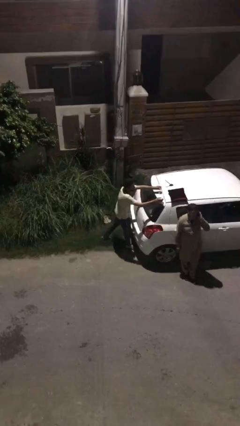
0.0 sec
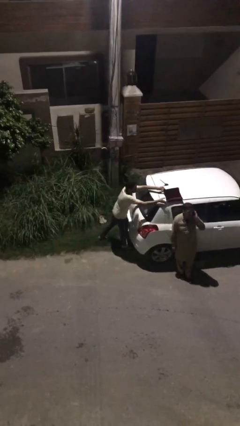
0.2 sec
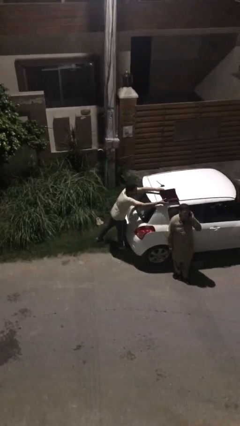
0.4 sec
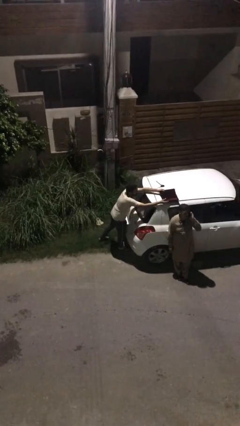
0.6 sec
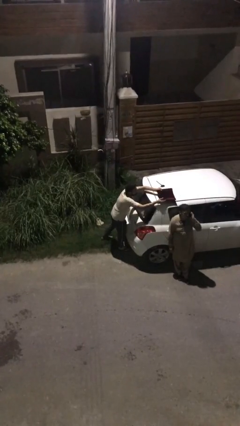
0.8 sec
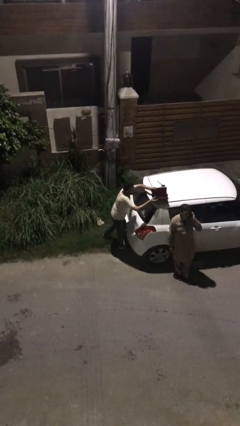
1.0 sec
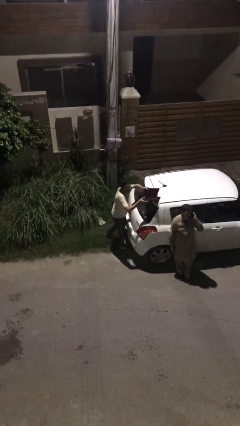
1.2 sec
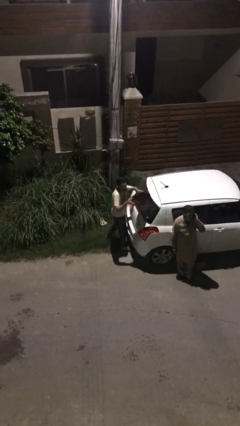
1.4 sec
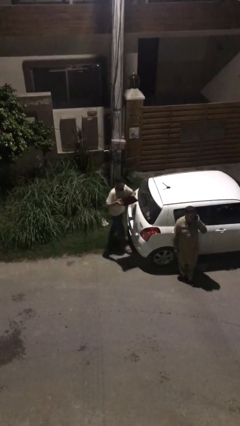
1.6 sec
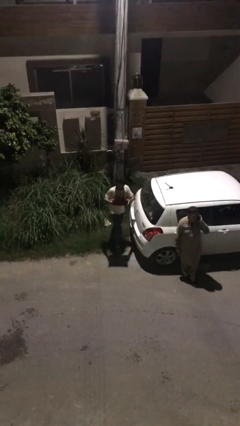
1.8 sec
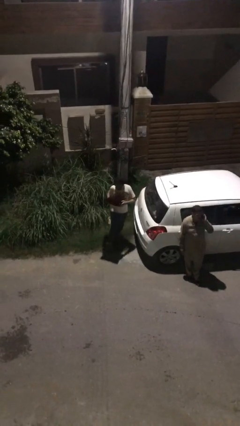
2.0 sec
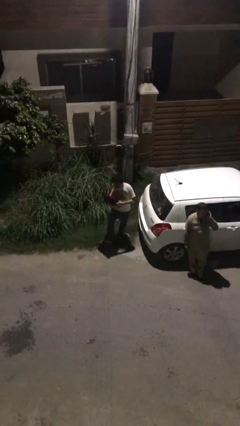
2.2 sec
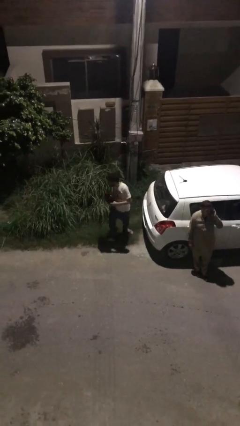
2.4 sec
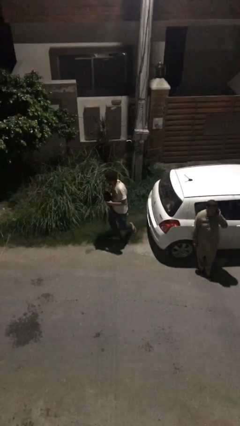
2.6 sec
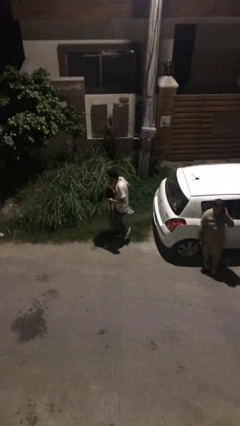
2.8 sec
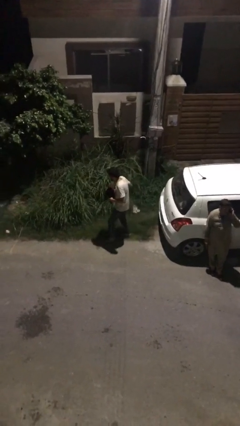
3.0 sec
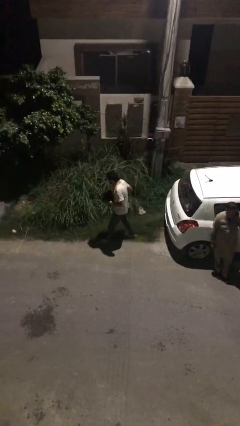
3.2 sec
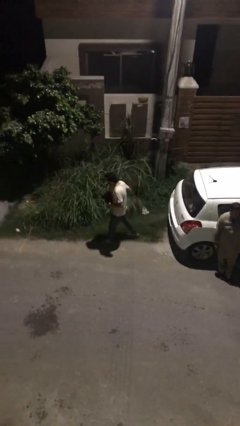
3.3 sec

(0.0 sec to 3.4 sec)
person steals object from person

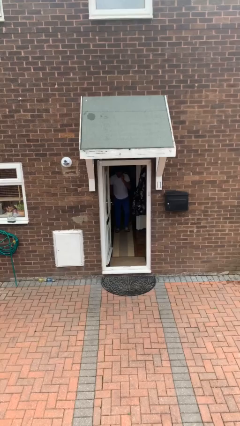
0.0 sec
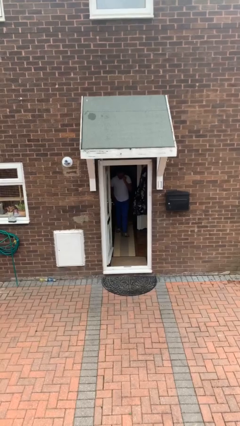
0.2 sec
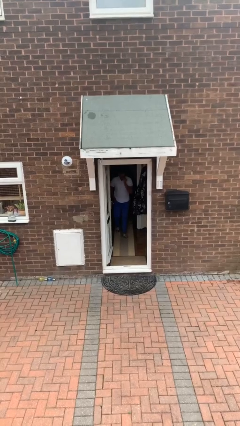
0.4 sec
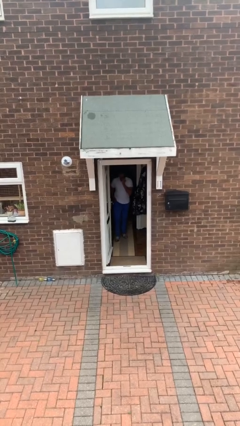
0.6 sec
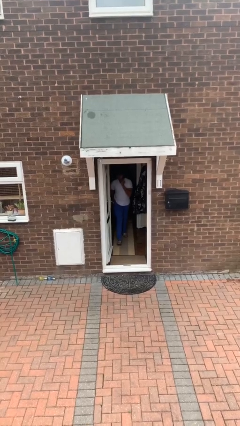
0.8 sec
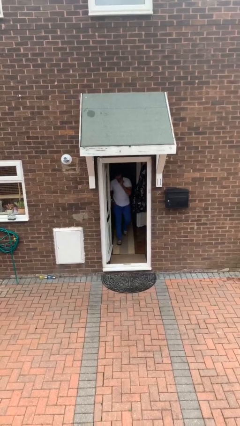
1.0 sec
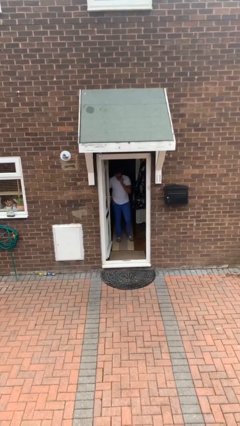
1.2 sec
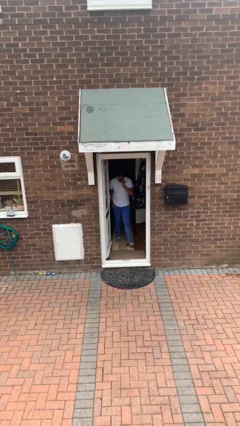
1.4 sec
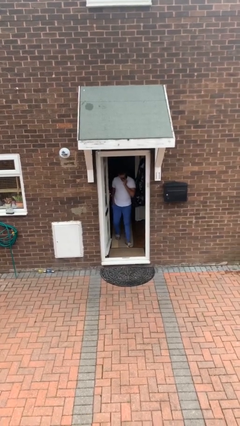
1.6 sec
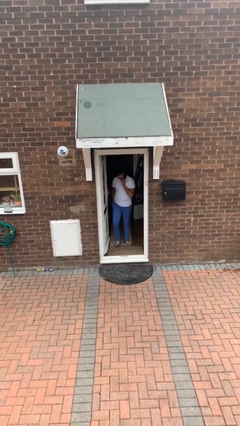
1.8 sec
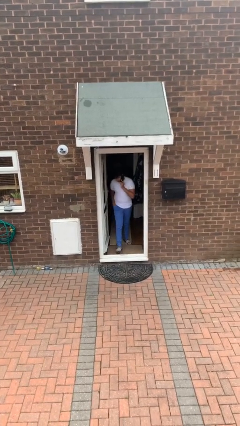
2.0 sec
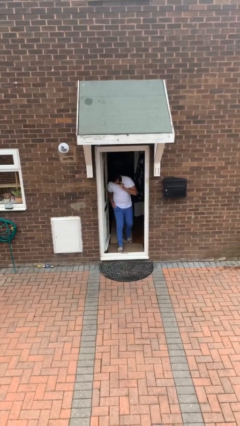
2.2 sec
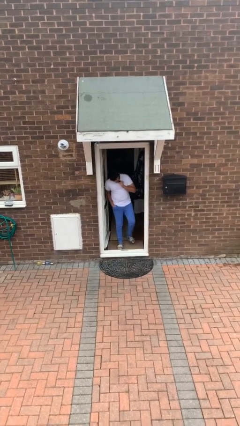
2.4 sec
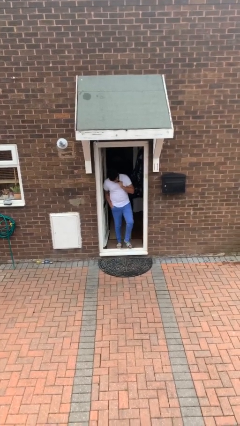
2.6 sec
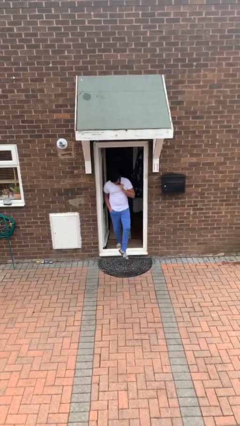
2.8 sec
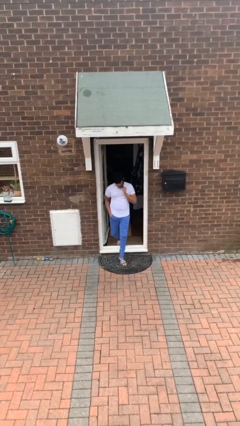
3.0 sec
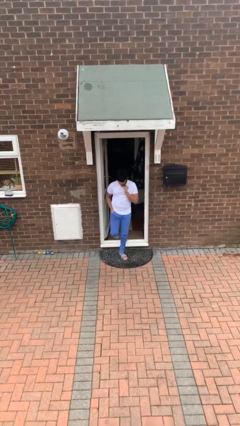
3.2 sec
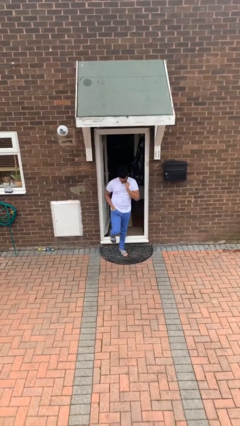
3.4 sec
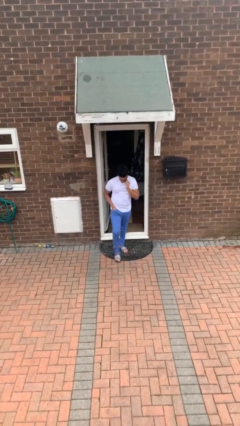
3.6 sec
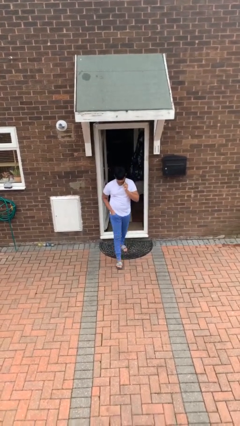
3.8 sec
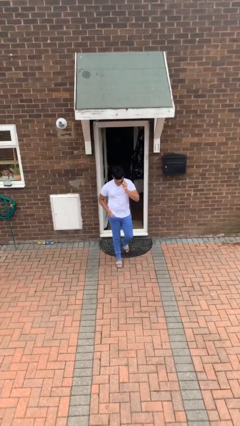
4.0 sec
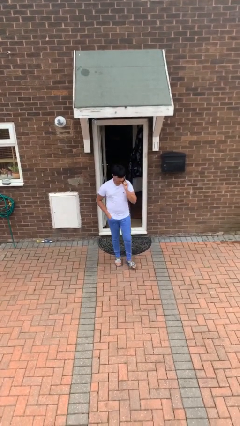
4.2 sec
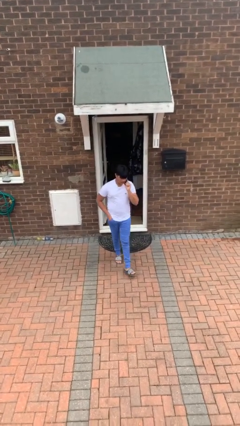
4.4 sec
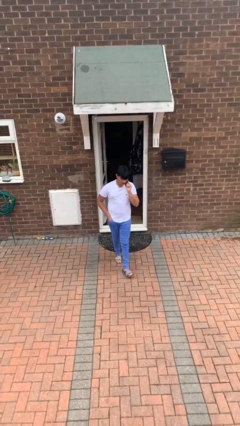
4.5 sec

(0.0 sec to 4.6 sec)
person enters scene through structure

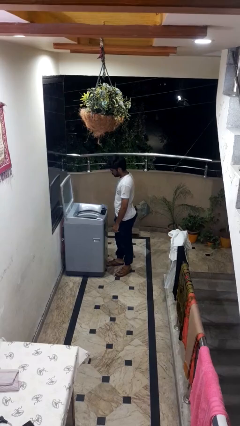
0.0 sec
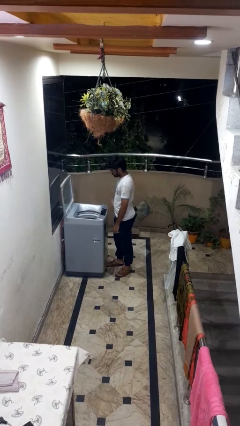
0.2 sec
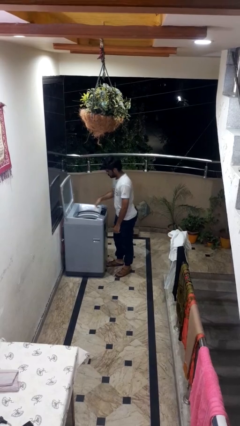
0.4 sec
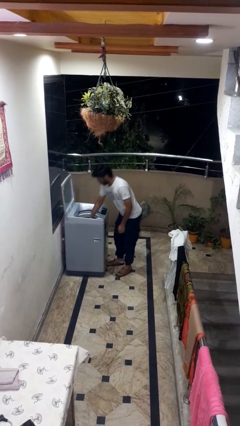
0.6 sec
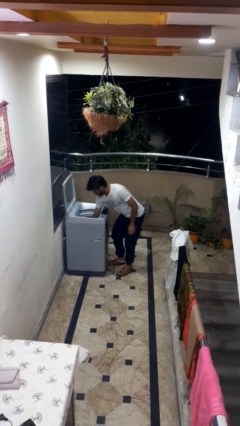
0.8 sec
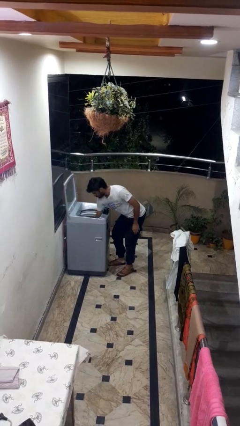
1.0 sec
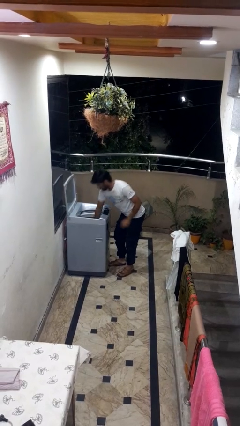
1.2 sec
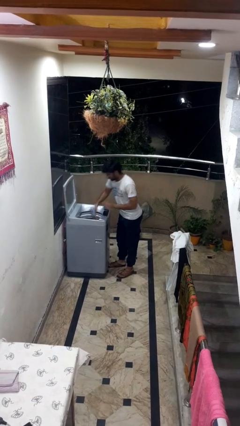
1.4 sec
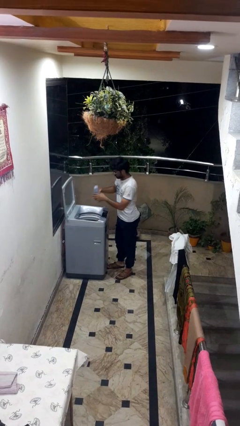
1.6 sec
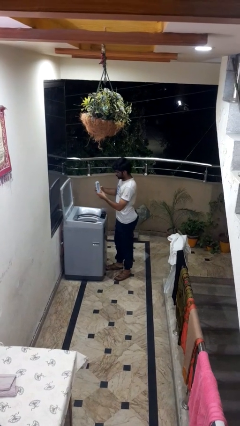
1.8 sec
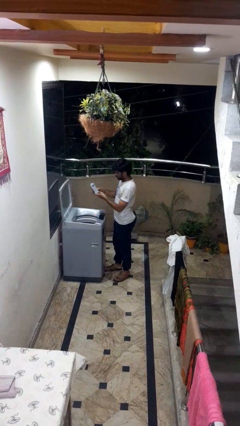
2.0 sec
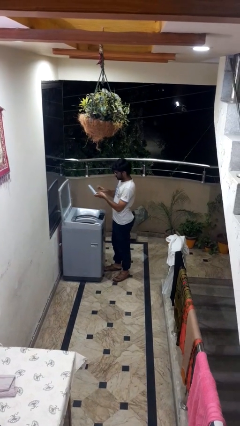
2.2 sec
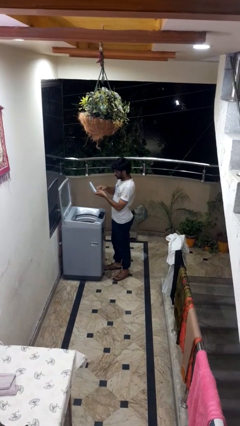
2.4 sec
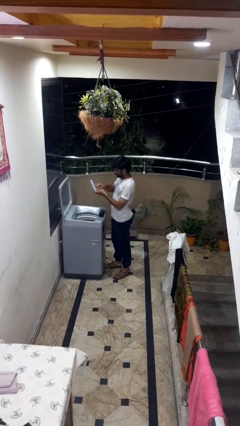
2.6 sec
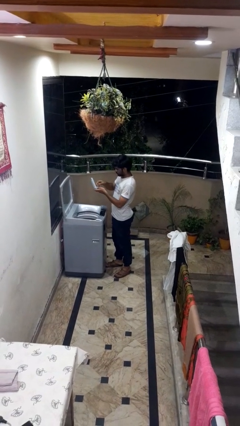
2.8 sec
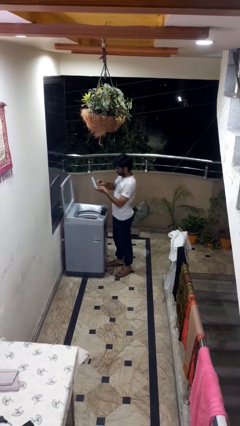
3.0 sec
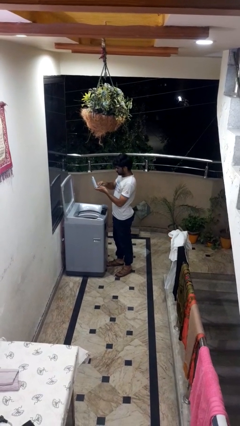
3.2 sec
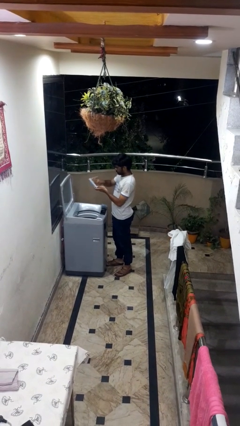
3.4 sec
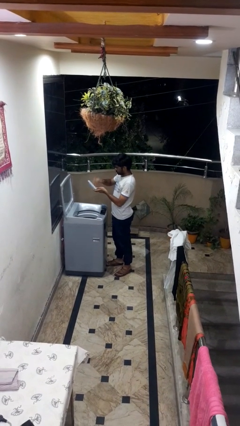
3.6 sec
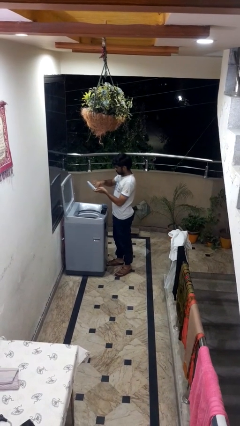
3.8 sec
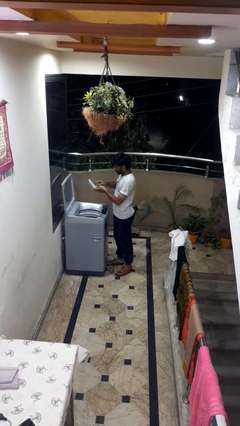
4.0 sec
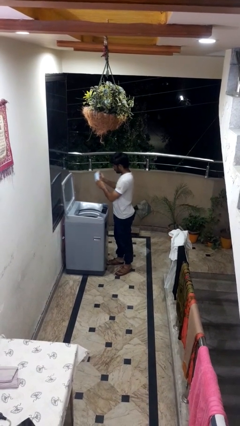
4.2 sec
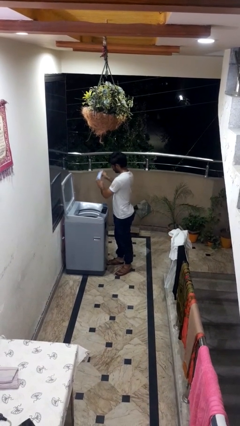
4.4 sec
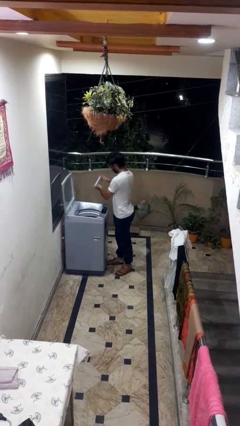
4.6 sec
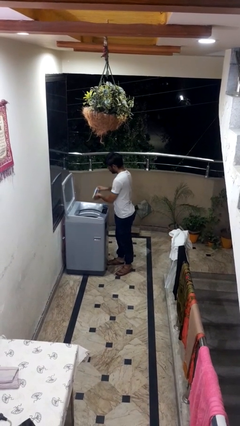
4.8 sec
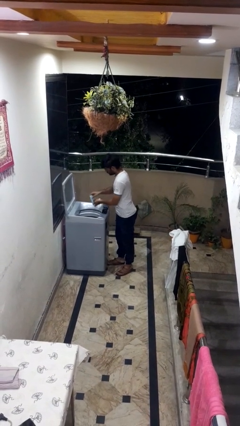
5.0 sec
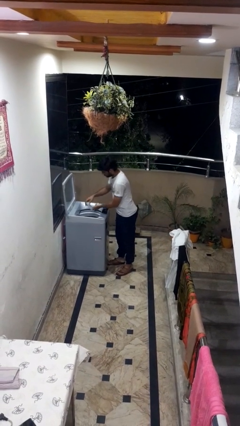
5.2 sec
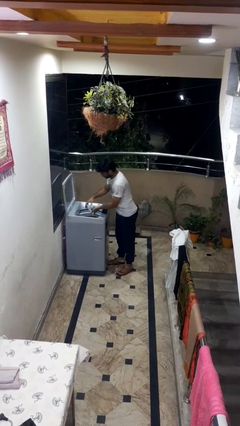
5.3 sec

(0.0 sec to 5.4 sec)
person cleans dryer lint trap

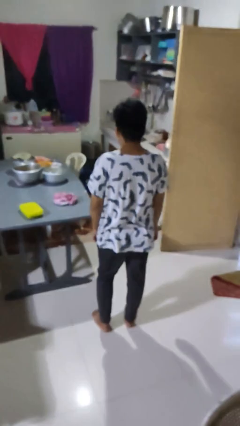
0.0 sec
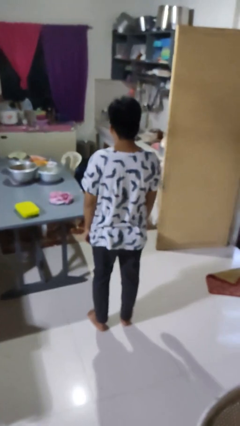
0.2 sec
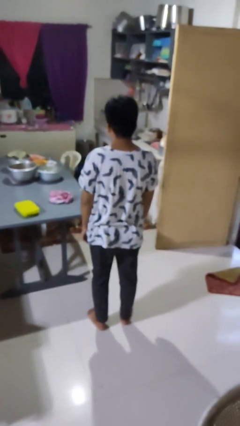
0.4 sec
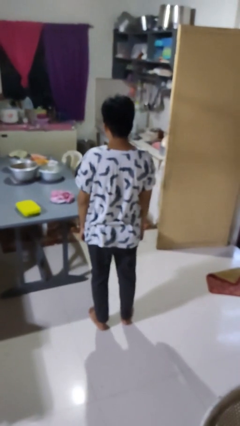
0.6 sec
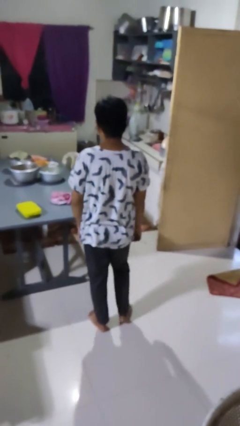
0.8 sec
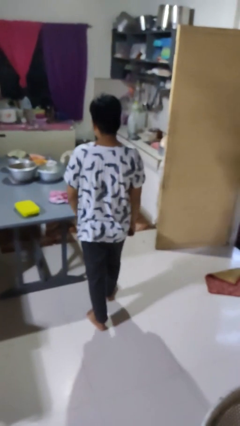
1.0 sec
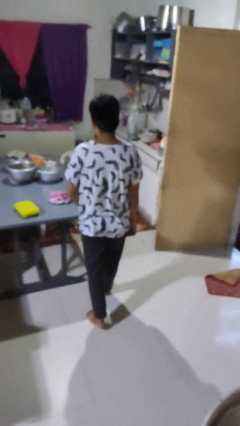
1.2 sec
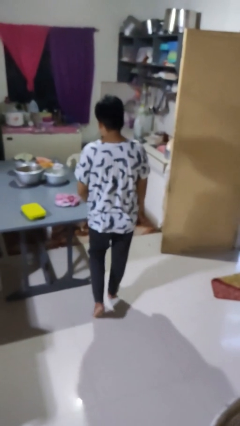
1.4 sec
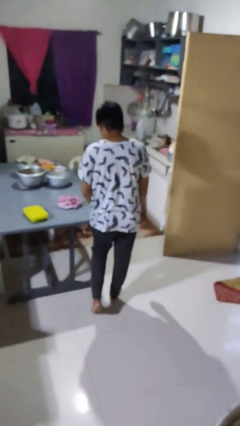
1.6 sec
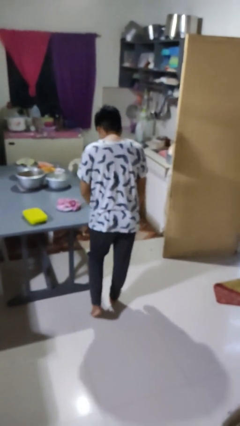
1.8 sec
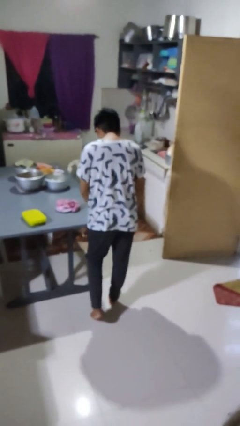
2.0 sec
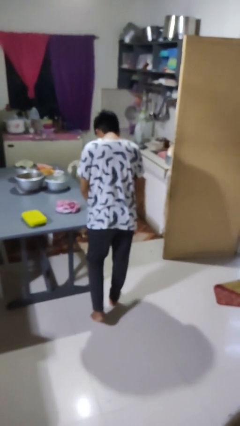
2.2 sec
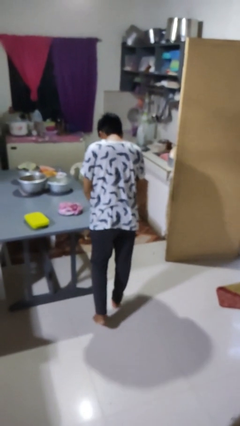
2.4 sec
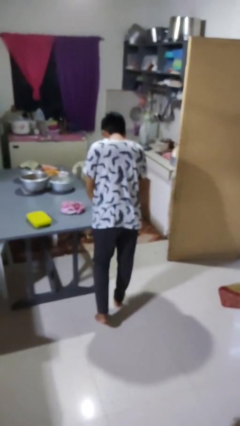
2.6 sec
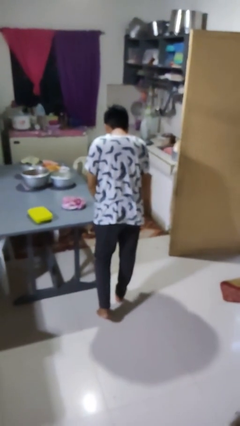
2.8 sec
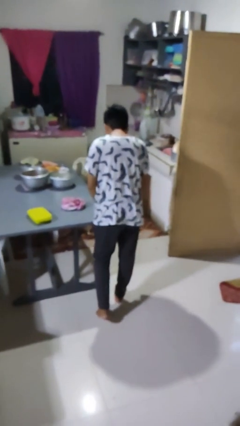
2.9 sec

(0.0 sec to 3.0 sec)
person bumps into table

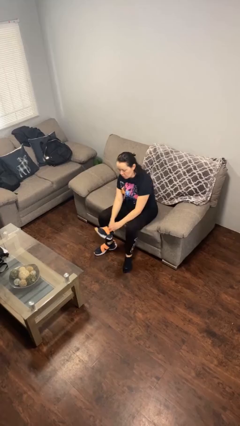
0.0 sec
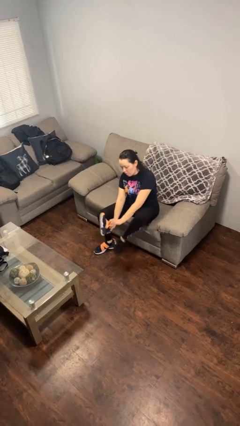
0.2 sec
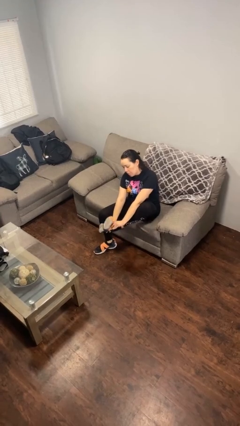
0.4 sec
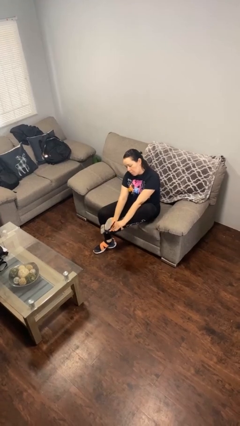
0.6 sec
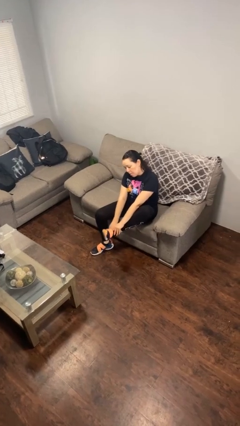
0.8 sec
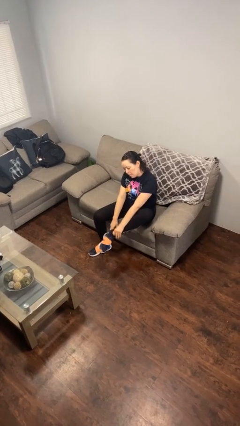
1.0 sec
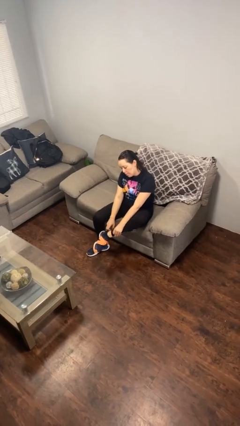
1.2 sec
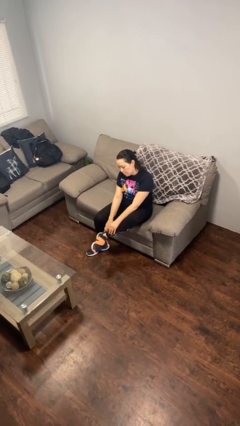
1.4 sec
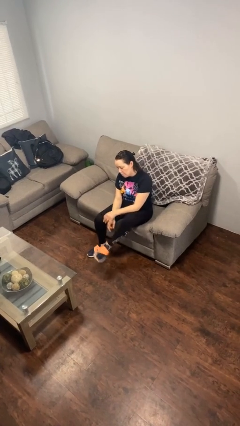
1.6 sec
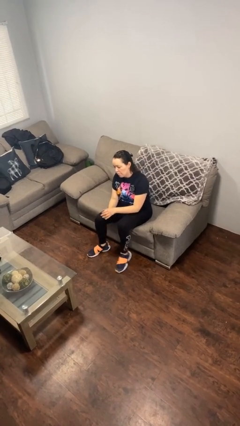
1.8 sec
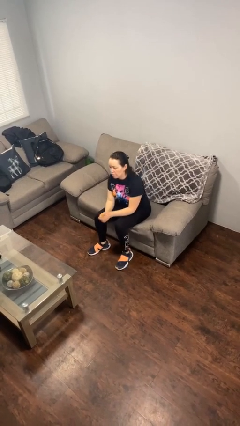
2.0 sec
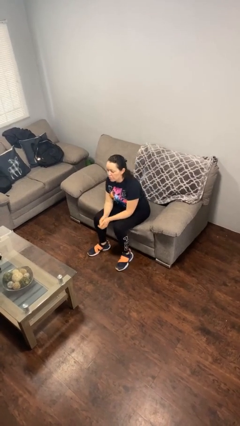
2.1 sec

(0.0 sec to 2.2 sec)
person puts on shoes
